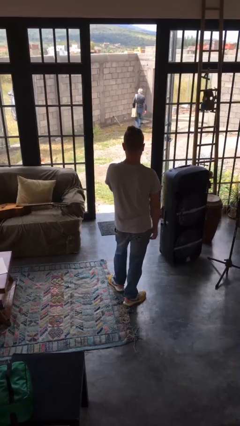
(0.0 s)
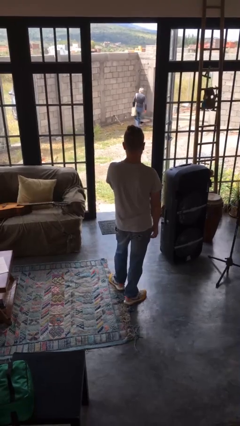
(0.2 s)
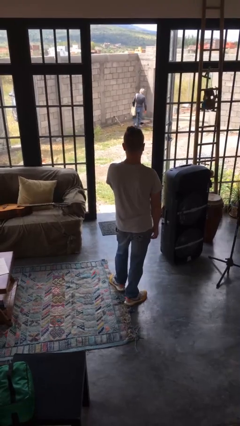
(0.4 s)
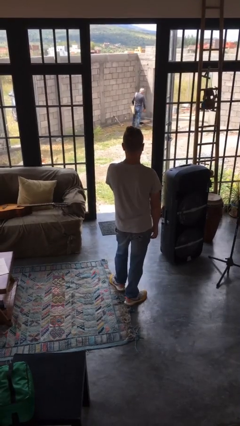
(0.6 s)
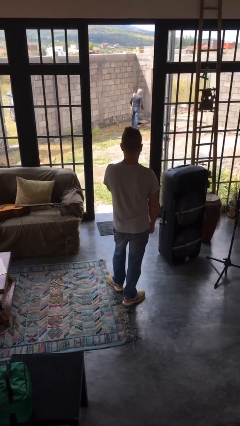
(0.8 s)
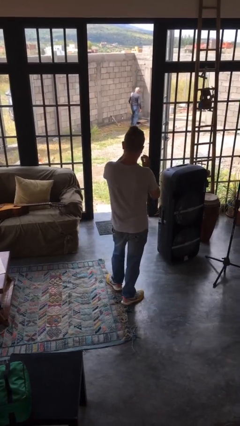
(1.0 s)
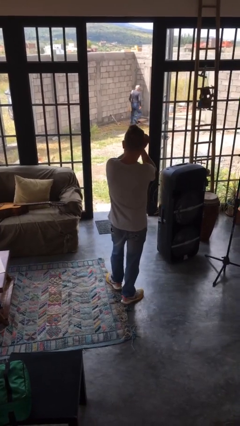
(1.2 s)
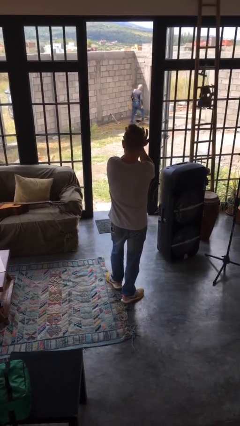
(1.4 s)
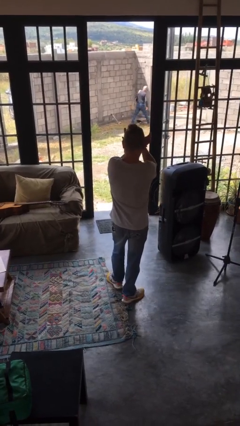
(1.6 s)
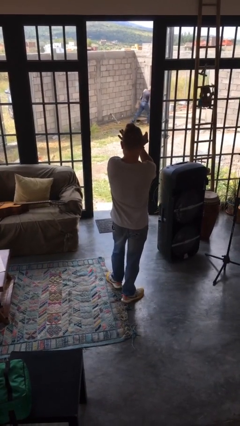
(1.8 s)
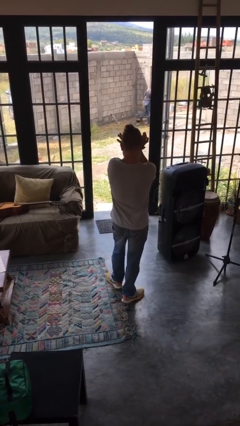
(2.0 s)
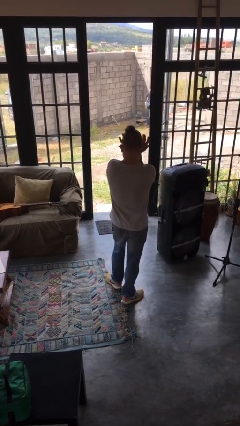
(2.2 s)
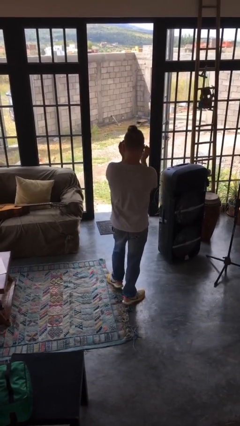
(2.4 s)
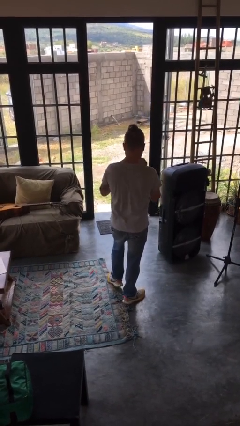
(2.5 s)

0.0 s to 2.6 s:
person rubs eyes

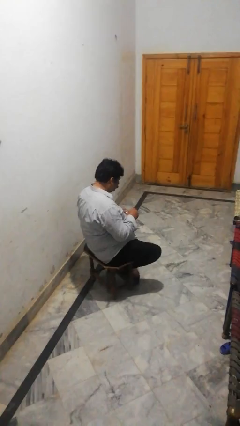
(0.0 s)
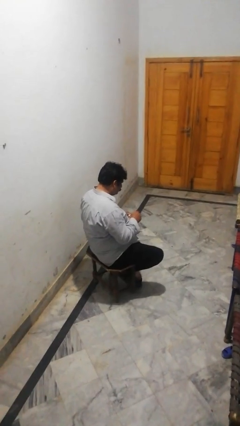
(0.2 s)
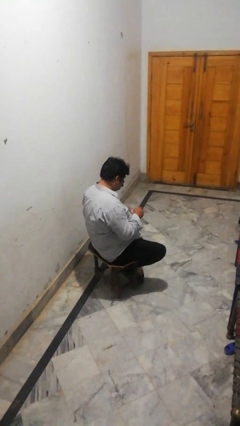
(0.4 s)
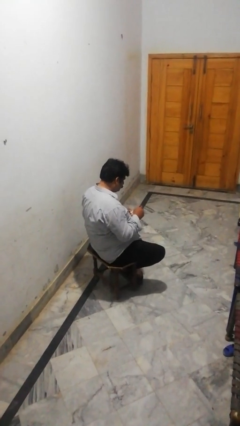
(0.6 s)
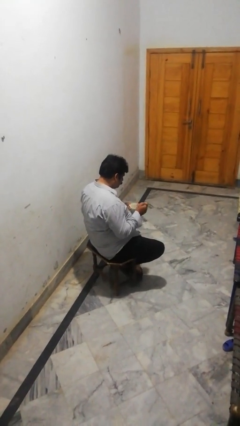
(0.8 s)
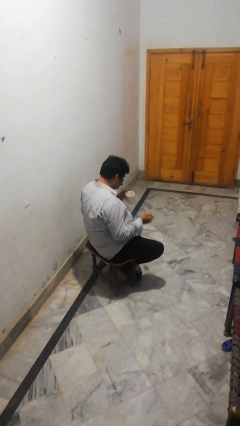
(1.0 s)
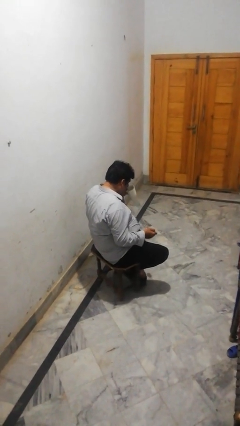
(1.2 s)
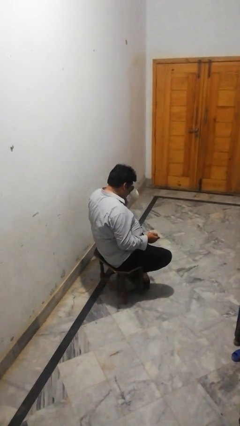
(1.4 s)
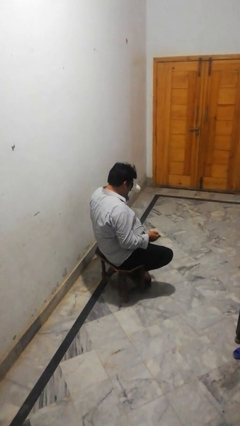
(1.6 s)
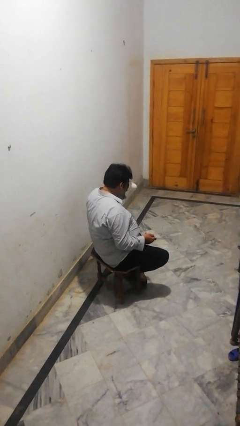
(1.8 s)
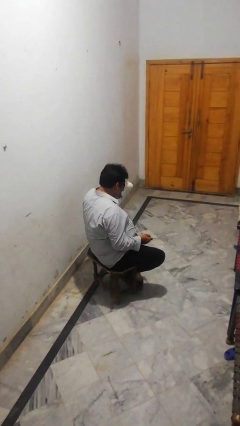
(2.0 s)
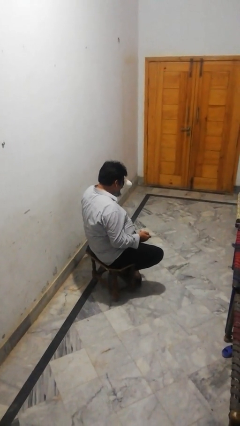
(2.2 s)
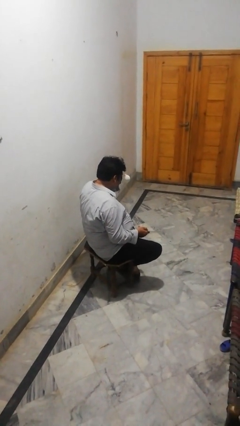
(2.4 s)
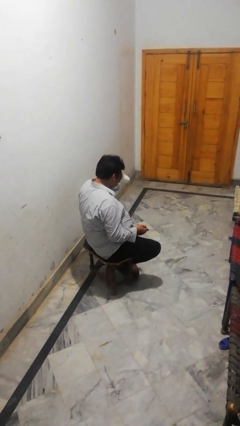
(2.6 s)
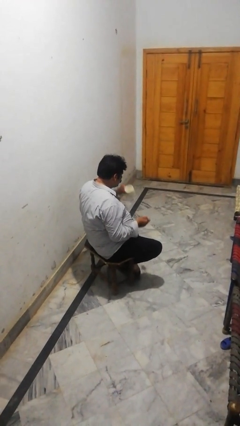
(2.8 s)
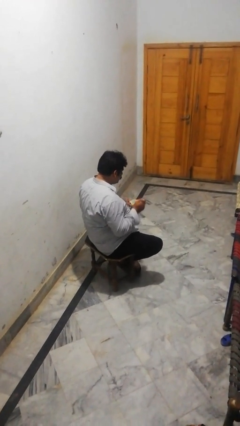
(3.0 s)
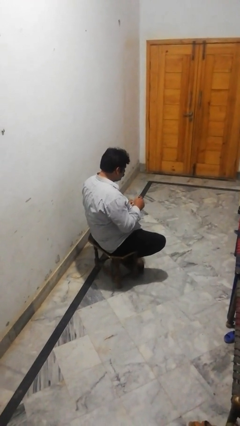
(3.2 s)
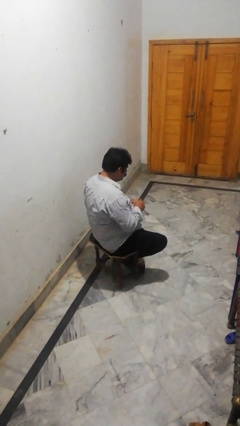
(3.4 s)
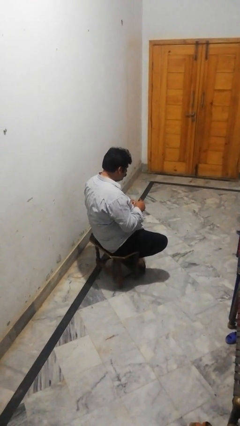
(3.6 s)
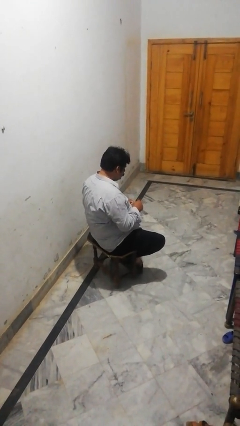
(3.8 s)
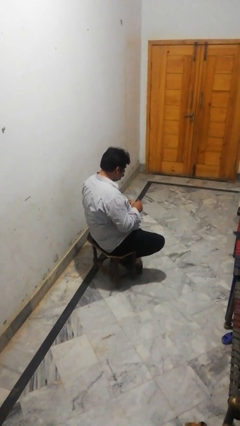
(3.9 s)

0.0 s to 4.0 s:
person drinks from mug

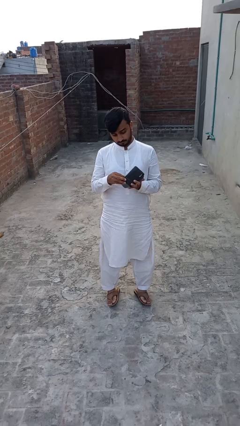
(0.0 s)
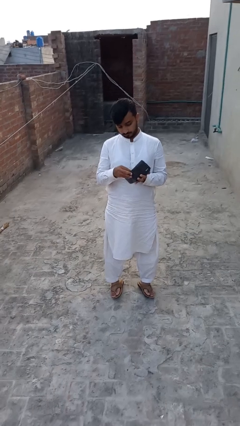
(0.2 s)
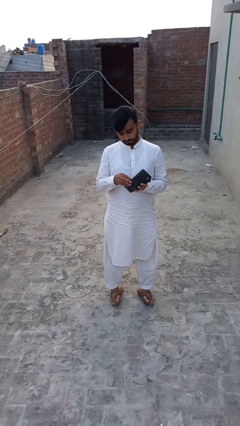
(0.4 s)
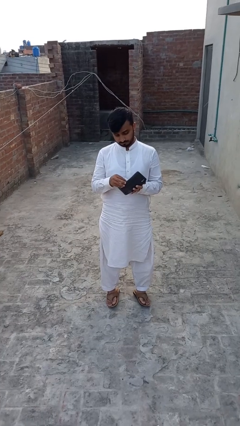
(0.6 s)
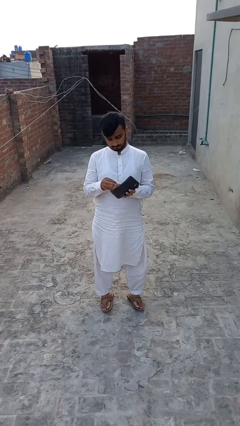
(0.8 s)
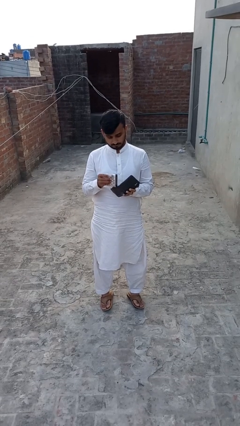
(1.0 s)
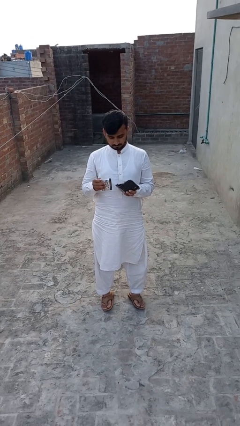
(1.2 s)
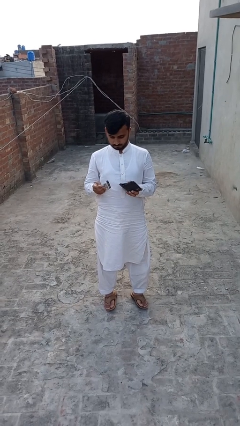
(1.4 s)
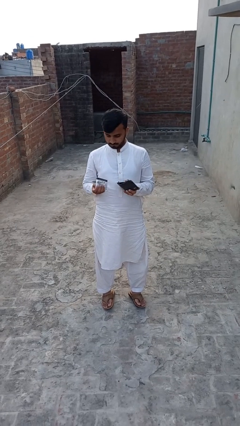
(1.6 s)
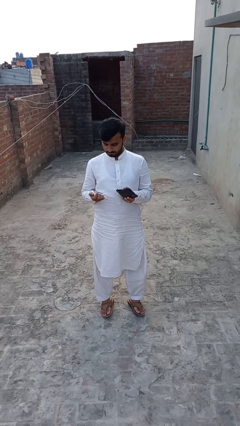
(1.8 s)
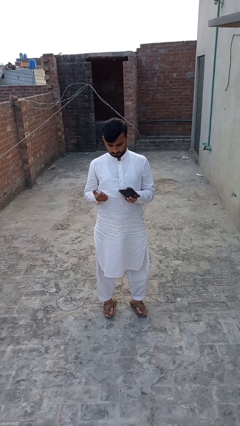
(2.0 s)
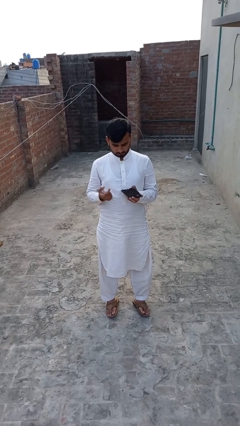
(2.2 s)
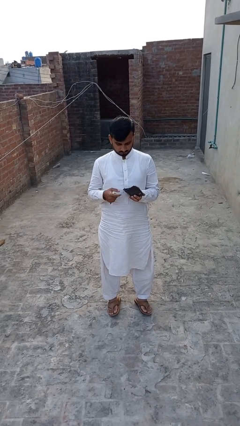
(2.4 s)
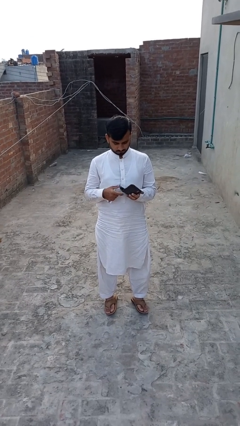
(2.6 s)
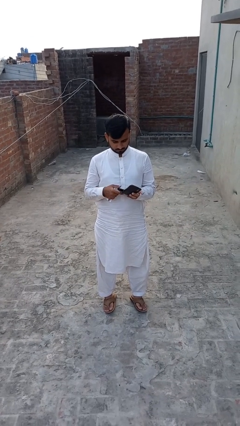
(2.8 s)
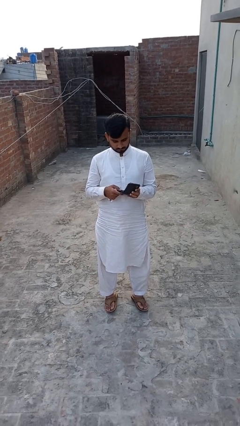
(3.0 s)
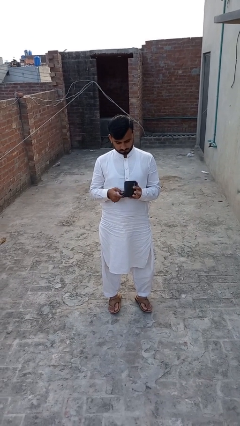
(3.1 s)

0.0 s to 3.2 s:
person takes object from purse

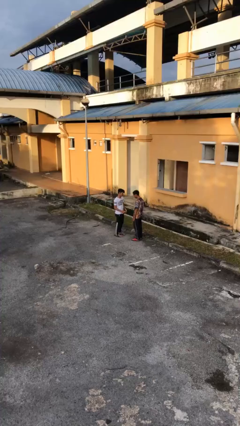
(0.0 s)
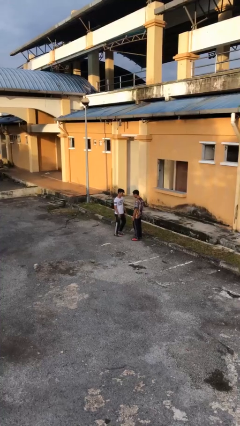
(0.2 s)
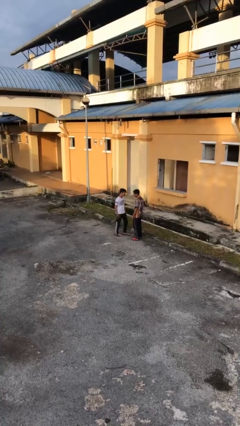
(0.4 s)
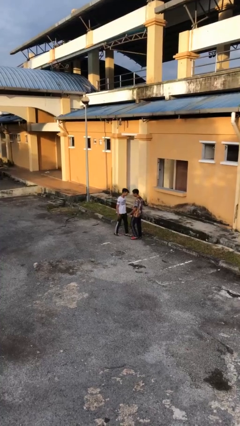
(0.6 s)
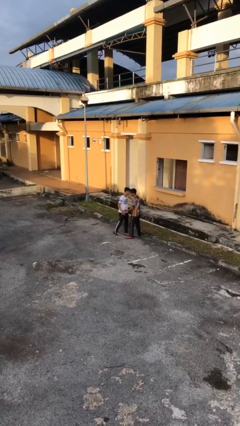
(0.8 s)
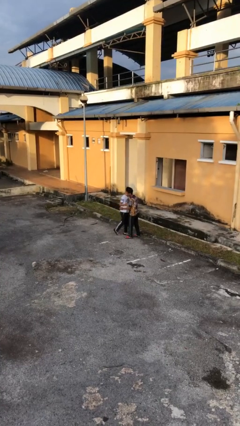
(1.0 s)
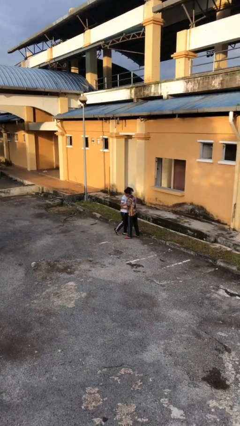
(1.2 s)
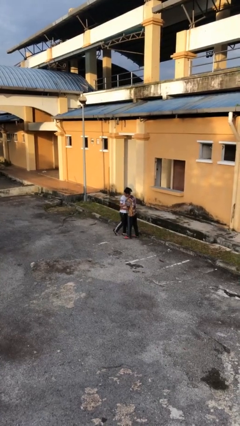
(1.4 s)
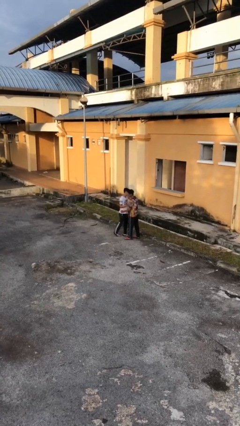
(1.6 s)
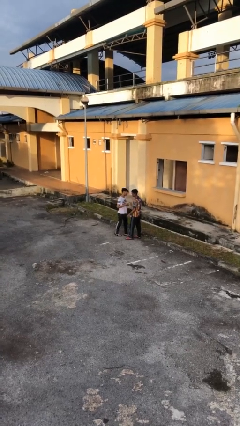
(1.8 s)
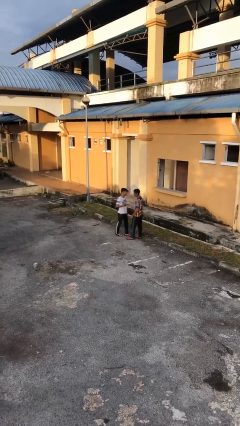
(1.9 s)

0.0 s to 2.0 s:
person embraces person

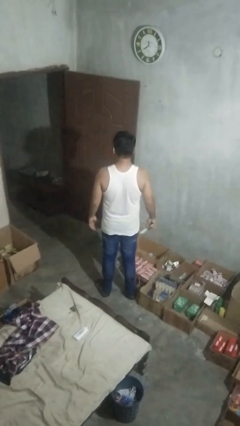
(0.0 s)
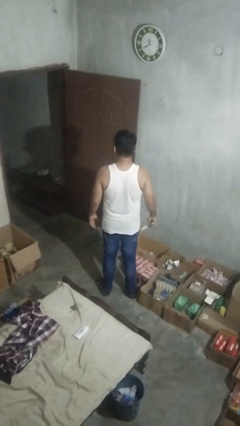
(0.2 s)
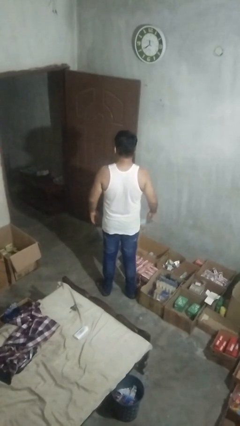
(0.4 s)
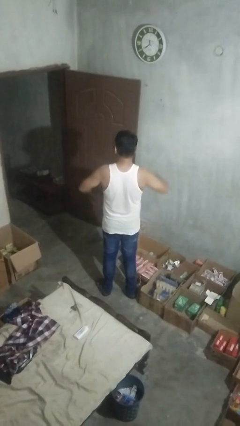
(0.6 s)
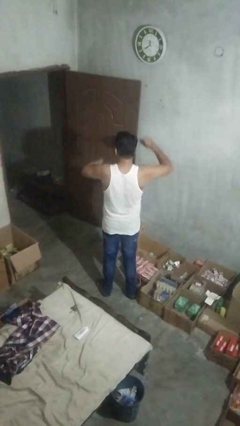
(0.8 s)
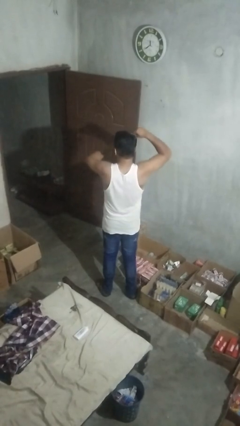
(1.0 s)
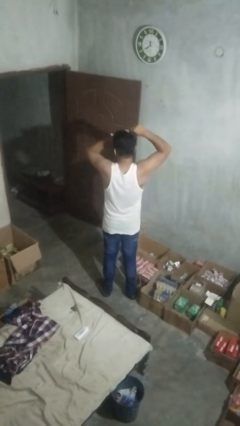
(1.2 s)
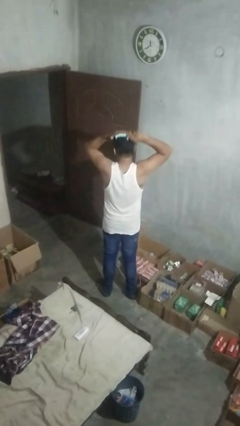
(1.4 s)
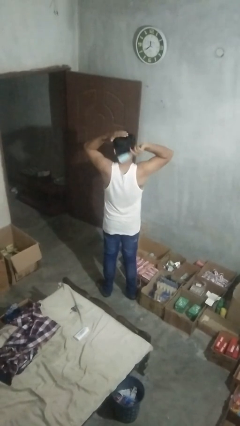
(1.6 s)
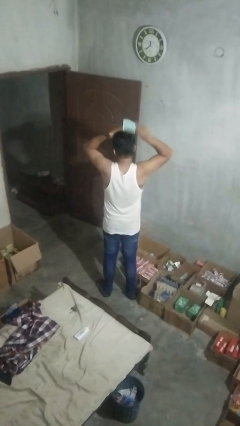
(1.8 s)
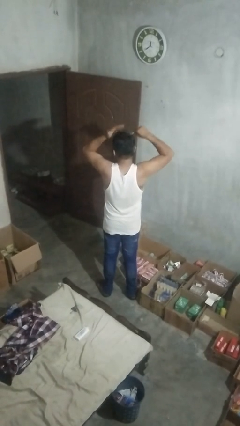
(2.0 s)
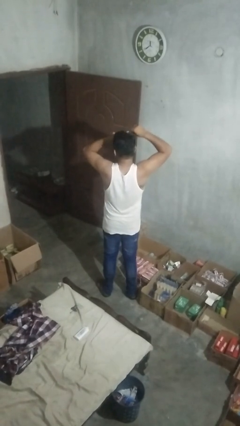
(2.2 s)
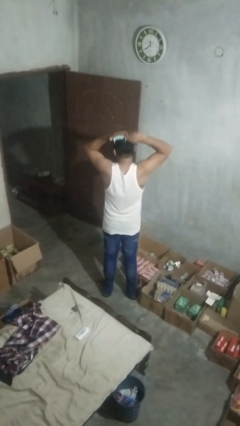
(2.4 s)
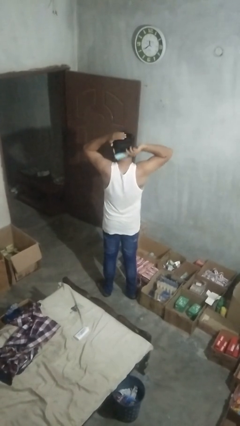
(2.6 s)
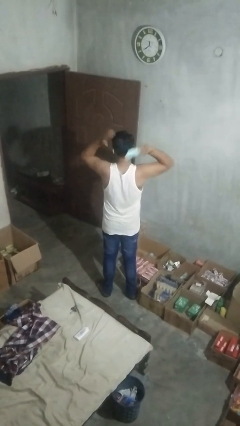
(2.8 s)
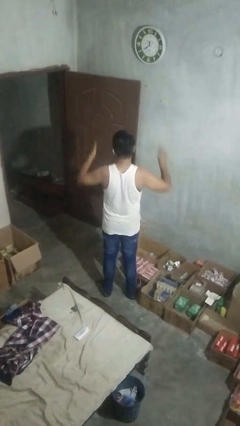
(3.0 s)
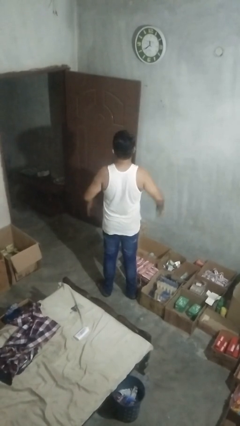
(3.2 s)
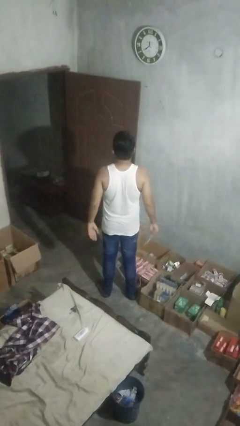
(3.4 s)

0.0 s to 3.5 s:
person brushes hair

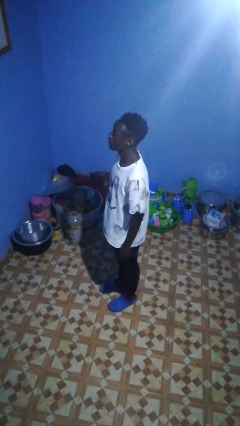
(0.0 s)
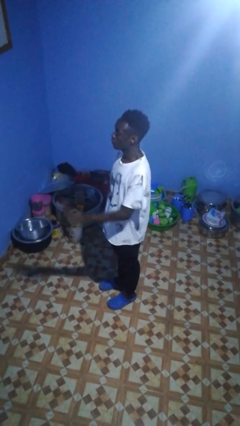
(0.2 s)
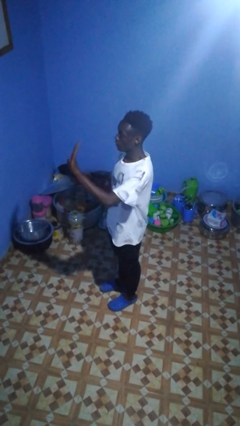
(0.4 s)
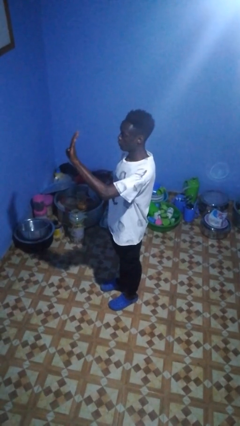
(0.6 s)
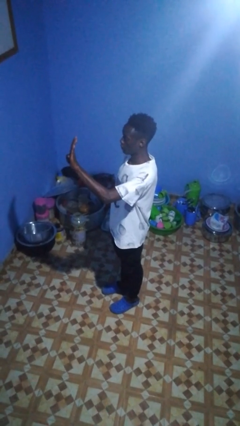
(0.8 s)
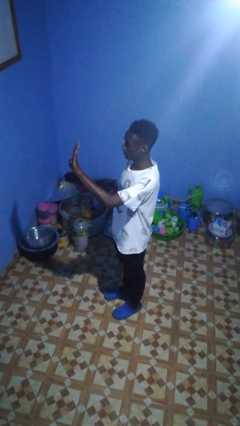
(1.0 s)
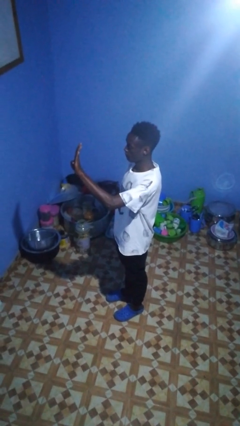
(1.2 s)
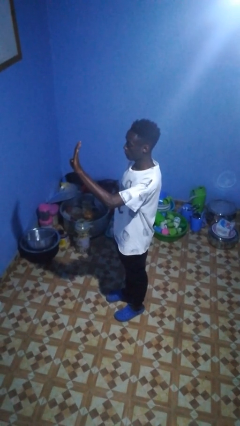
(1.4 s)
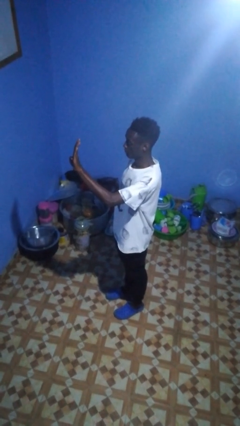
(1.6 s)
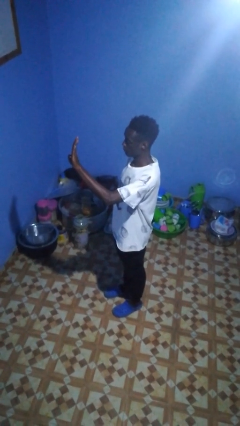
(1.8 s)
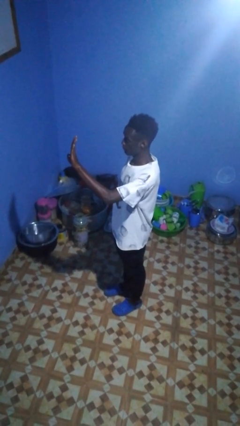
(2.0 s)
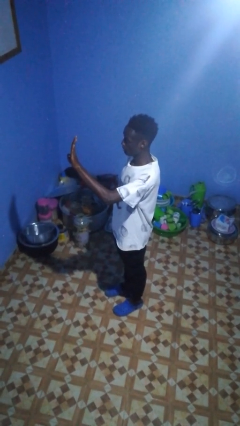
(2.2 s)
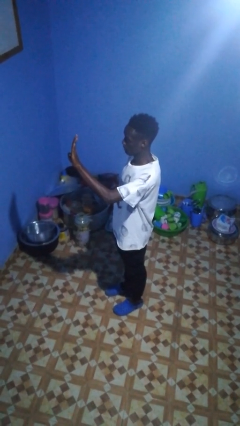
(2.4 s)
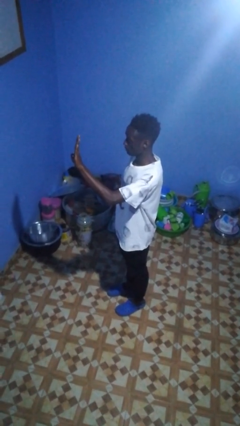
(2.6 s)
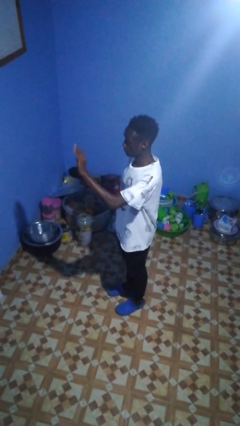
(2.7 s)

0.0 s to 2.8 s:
person gestures number four
